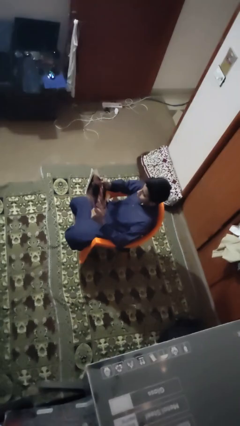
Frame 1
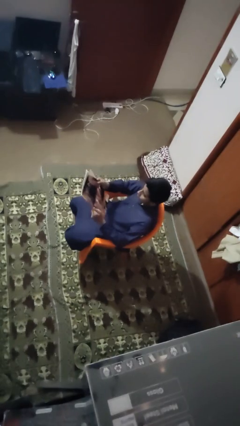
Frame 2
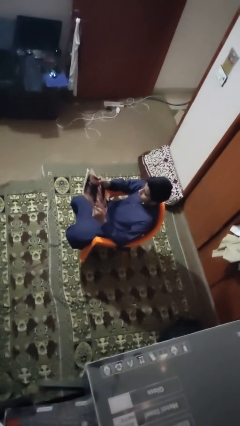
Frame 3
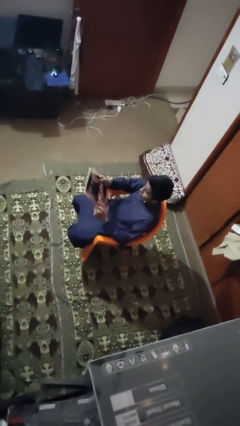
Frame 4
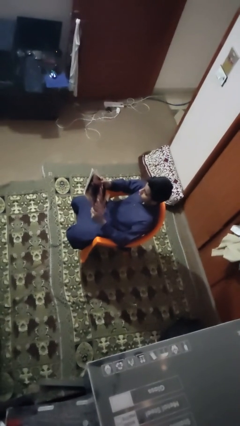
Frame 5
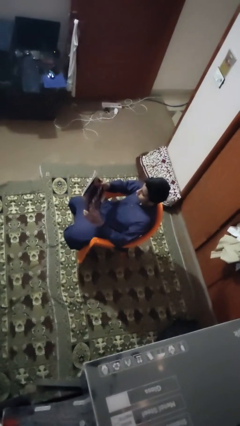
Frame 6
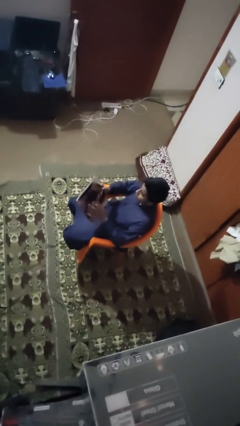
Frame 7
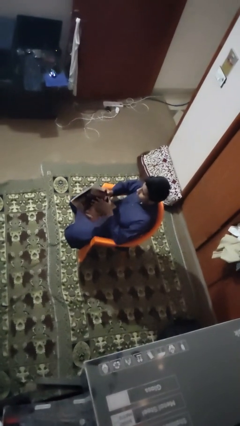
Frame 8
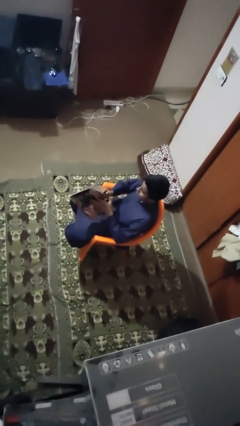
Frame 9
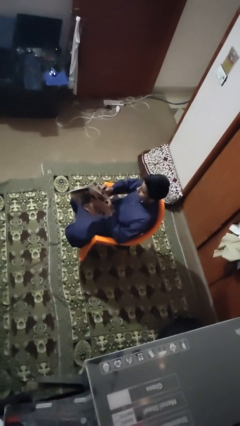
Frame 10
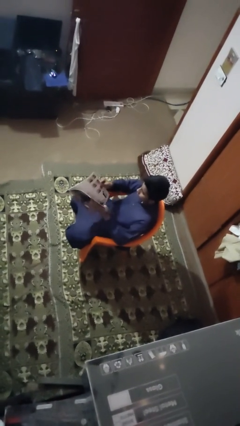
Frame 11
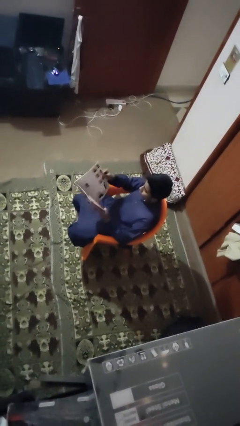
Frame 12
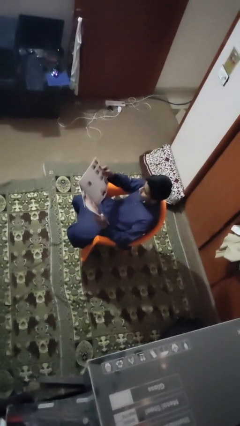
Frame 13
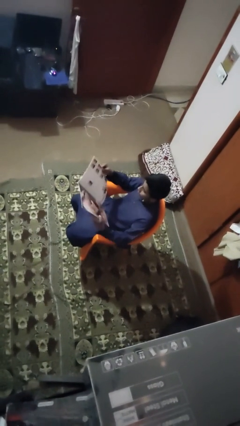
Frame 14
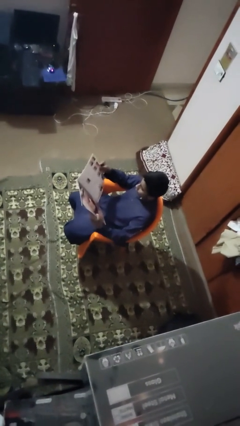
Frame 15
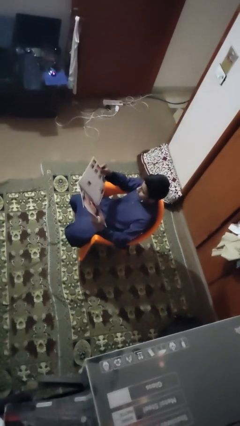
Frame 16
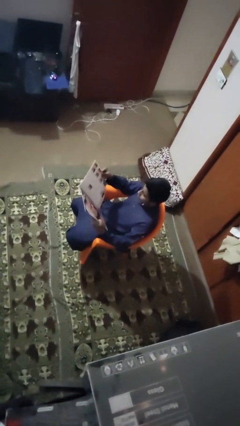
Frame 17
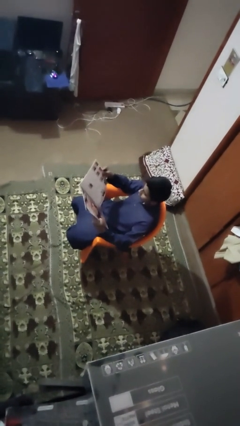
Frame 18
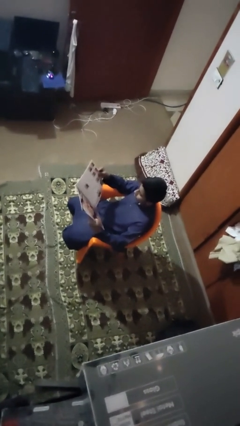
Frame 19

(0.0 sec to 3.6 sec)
person reads magazine

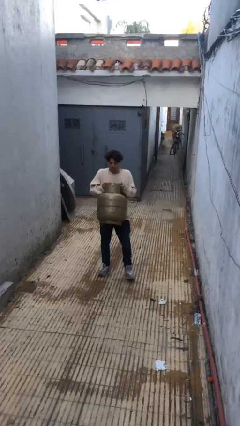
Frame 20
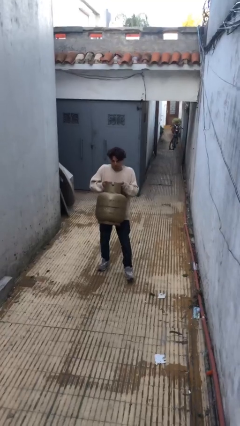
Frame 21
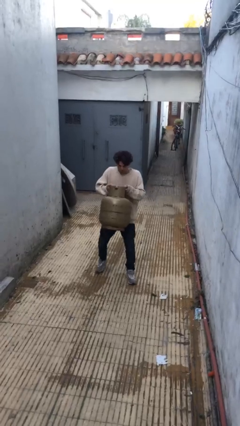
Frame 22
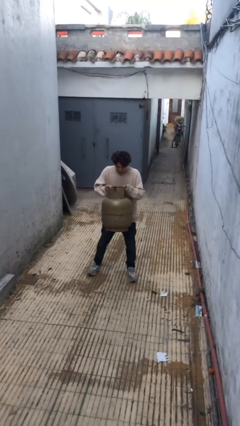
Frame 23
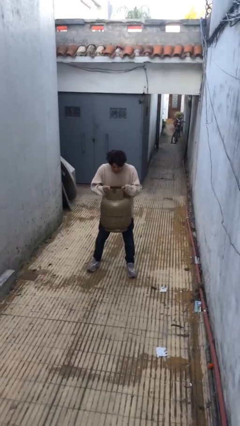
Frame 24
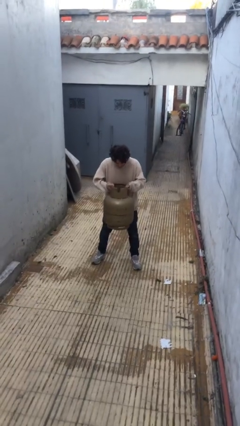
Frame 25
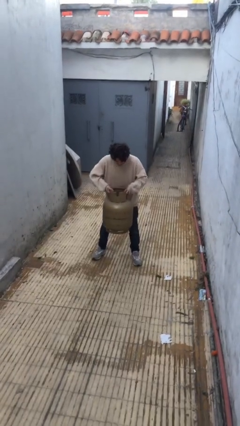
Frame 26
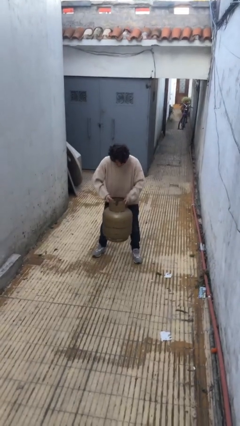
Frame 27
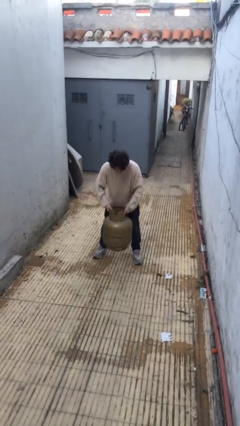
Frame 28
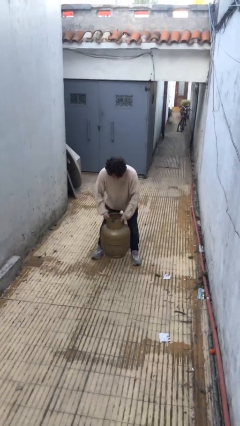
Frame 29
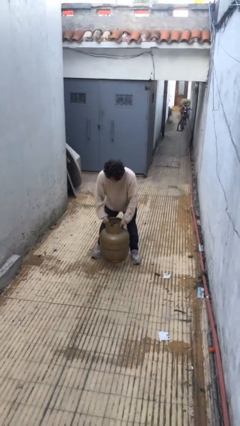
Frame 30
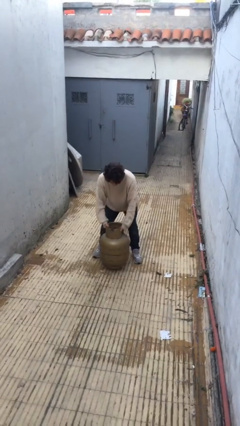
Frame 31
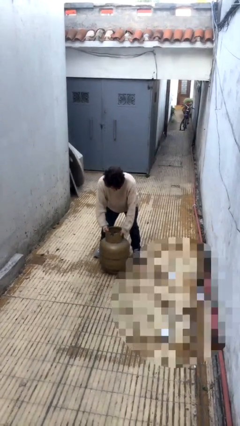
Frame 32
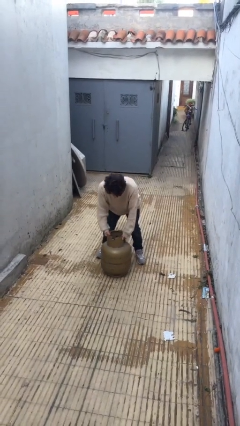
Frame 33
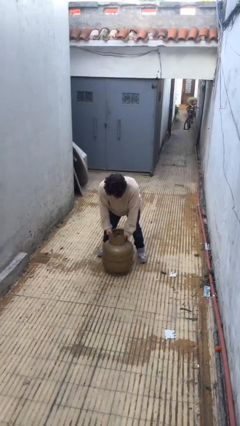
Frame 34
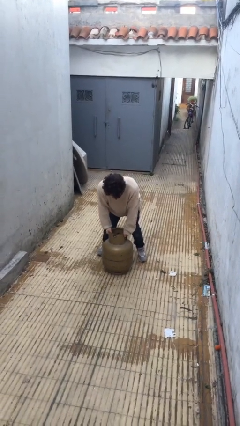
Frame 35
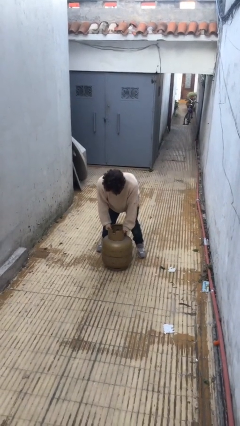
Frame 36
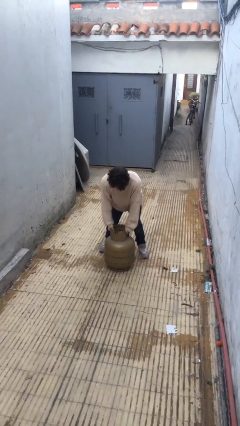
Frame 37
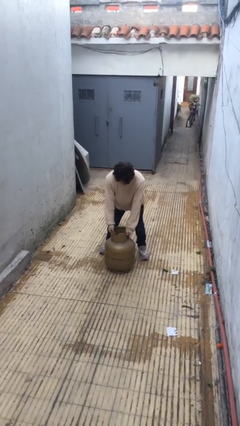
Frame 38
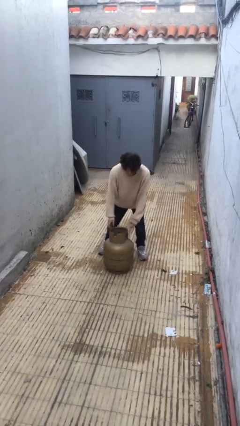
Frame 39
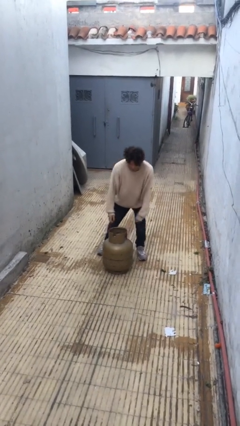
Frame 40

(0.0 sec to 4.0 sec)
person puts down object on floor

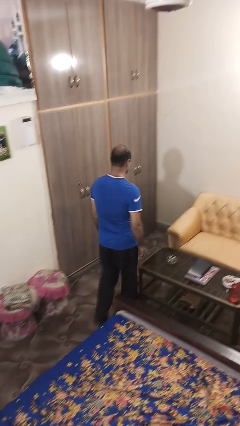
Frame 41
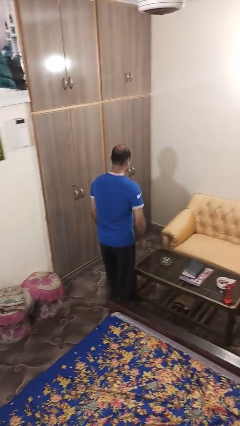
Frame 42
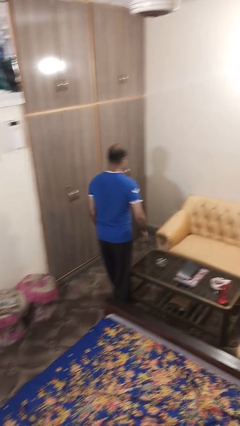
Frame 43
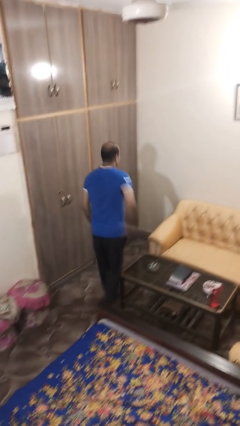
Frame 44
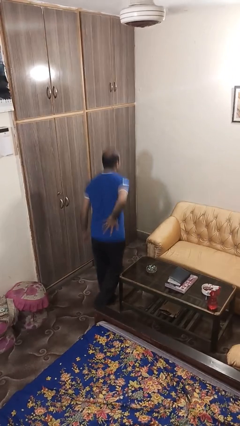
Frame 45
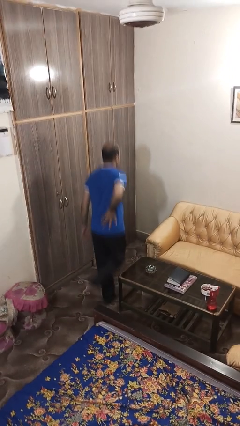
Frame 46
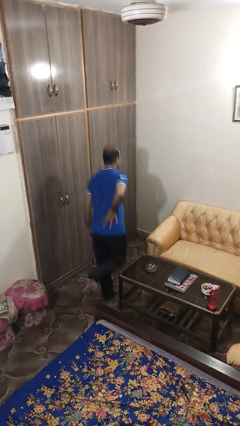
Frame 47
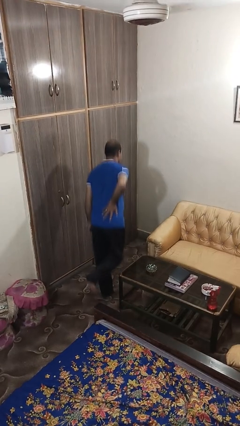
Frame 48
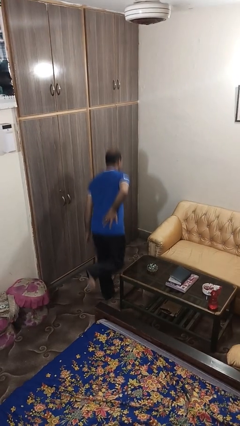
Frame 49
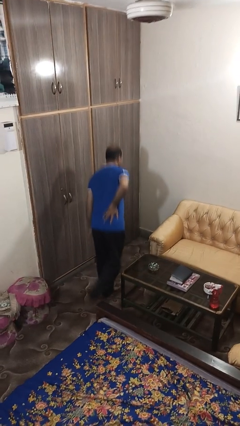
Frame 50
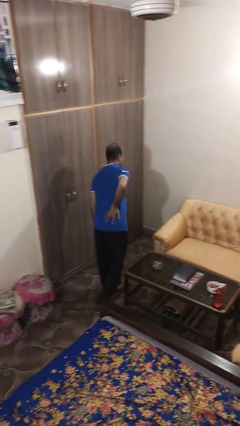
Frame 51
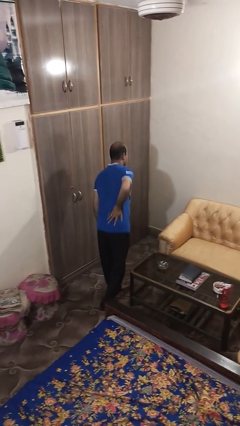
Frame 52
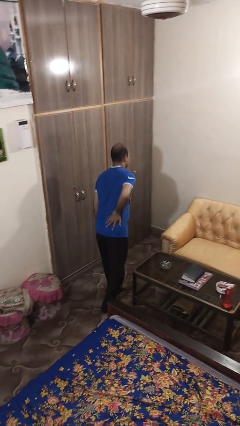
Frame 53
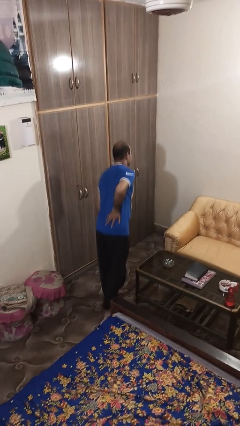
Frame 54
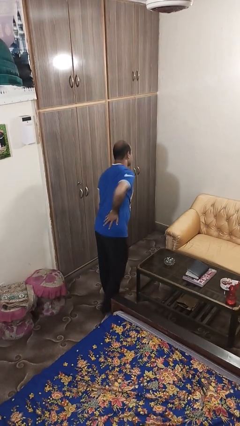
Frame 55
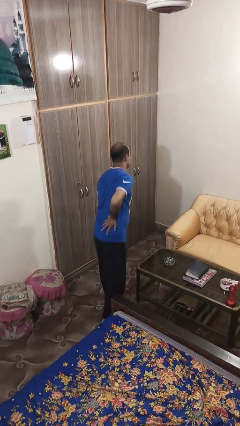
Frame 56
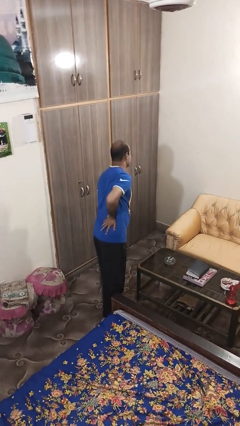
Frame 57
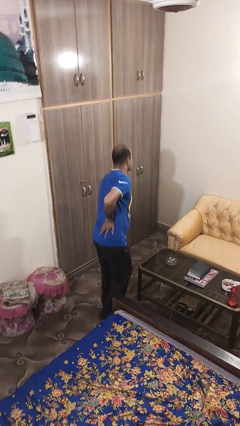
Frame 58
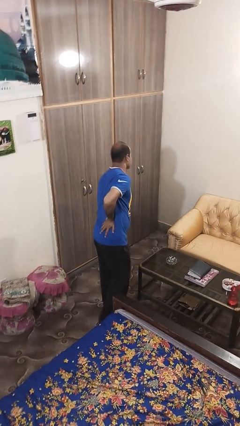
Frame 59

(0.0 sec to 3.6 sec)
person bumps into table

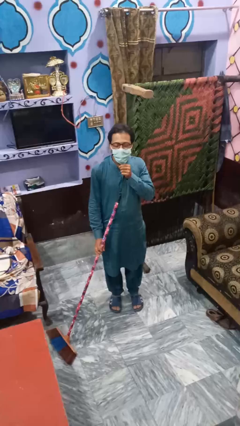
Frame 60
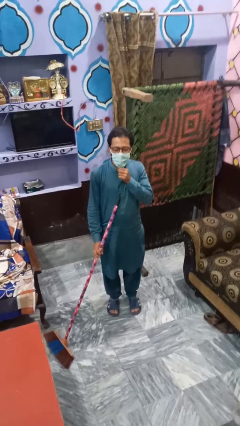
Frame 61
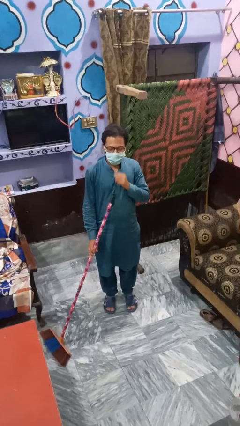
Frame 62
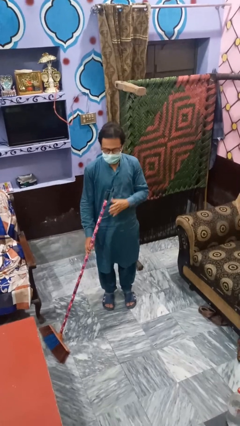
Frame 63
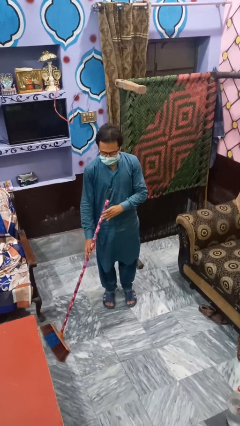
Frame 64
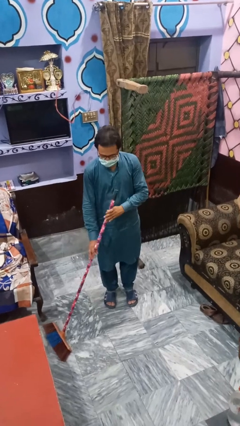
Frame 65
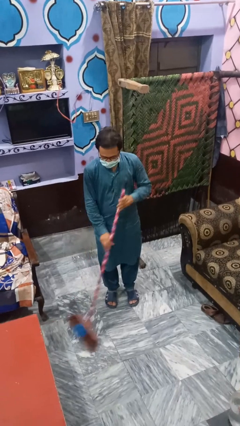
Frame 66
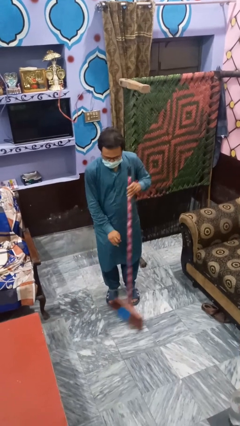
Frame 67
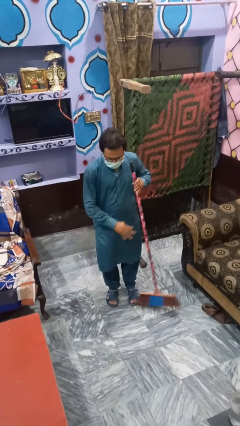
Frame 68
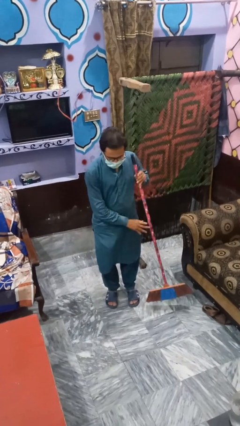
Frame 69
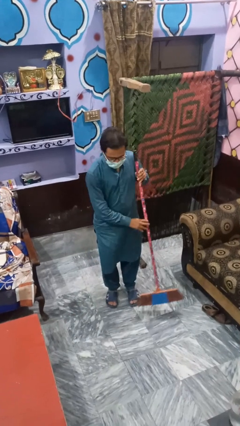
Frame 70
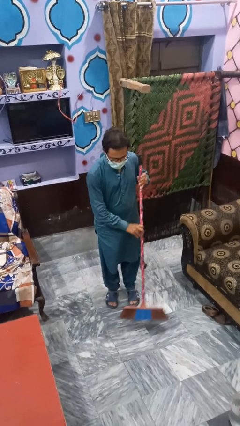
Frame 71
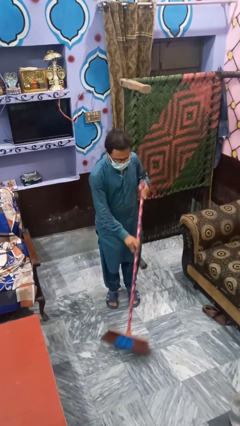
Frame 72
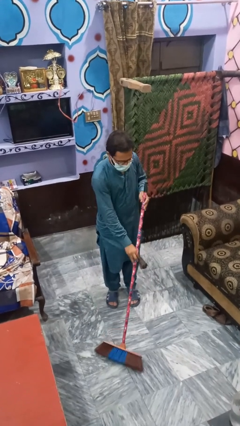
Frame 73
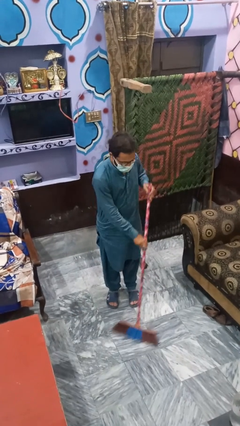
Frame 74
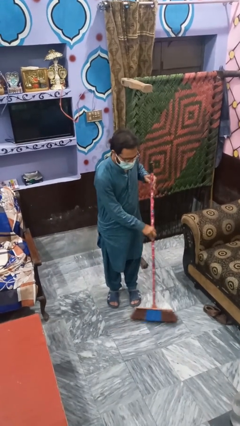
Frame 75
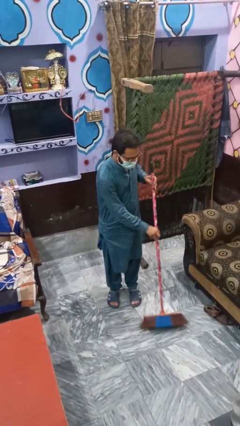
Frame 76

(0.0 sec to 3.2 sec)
person mops

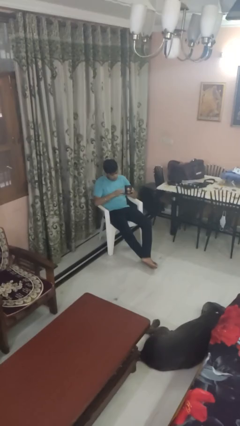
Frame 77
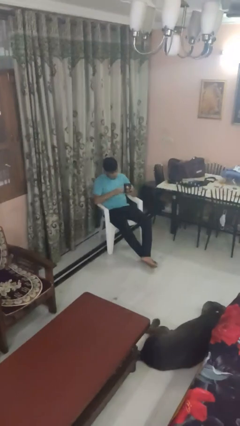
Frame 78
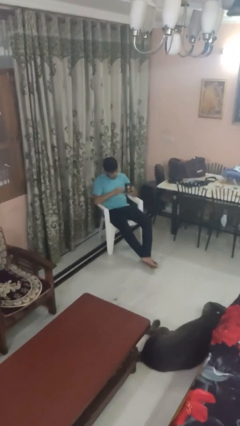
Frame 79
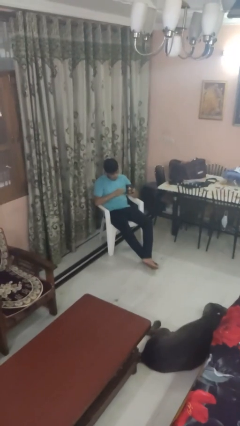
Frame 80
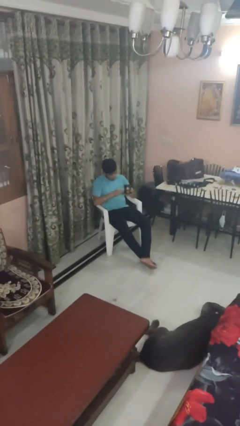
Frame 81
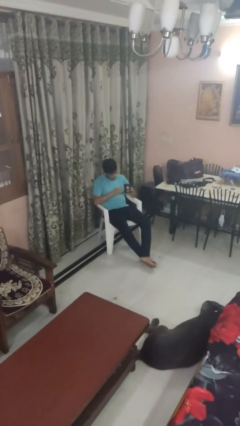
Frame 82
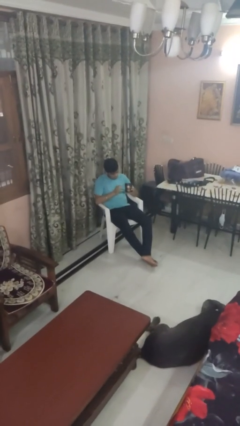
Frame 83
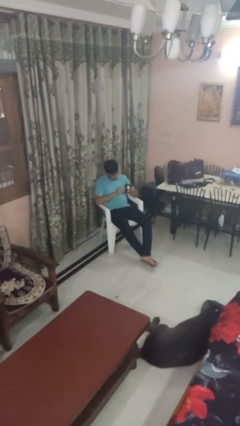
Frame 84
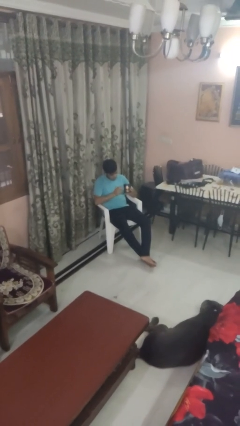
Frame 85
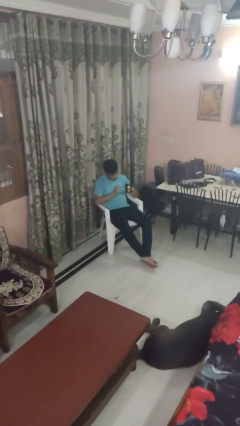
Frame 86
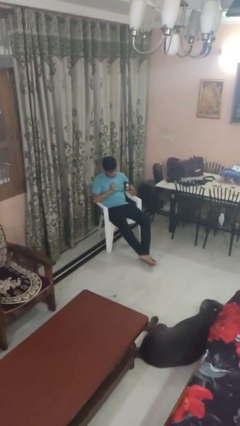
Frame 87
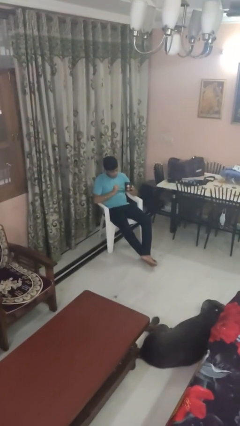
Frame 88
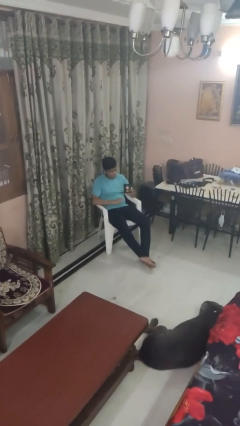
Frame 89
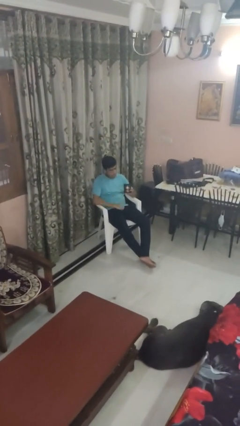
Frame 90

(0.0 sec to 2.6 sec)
person taps object with finger

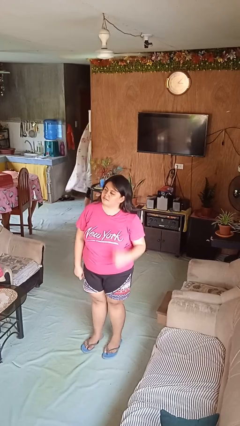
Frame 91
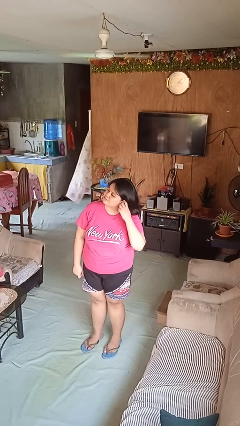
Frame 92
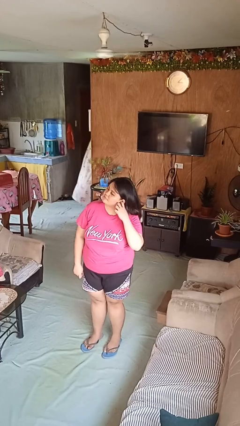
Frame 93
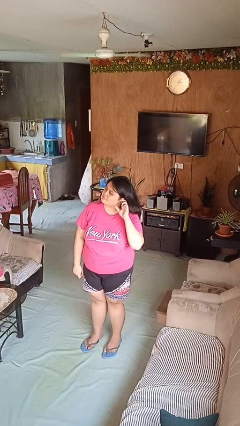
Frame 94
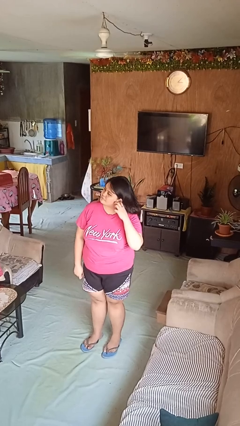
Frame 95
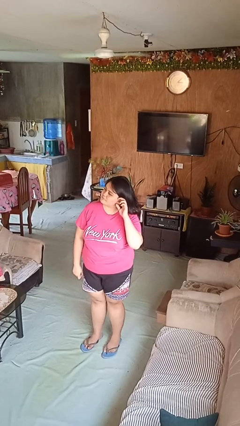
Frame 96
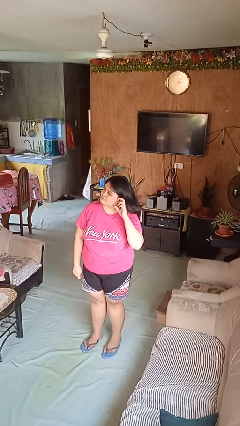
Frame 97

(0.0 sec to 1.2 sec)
person touches earlobe
